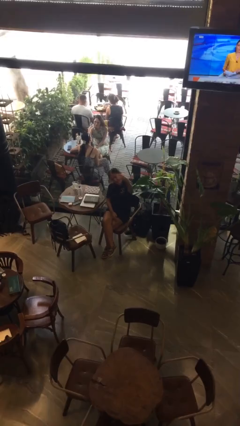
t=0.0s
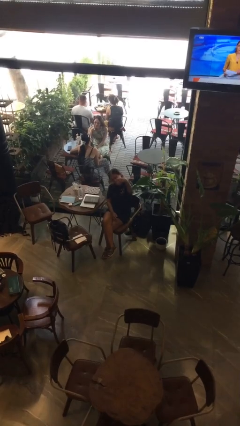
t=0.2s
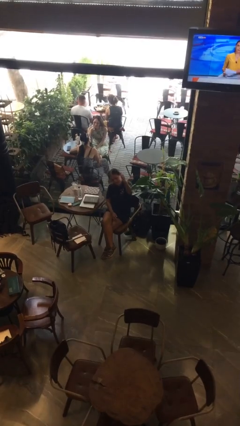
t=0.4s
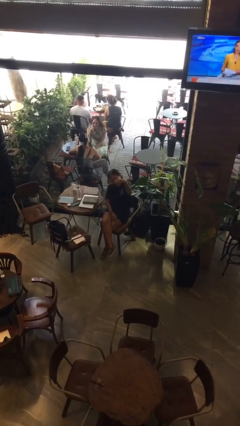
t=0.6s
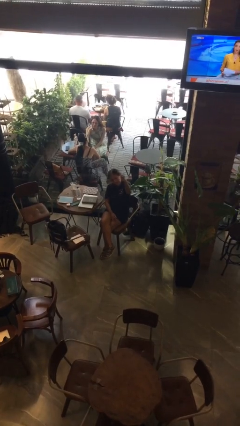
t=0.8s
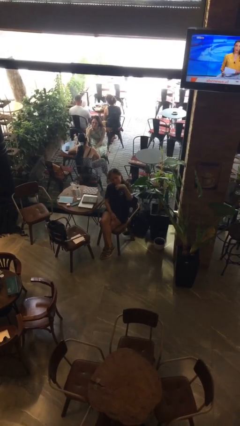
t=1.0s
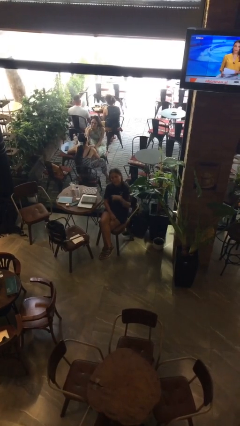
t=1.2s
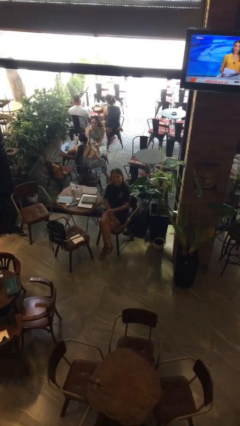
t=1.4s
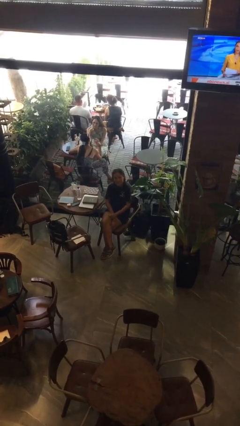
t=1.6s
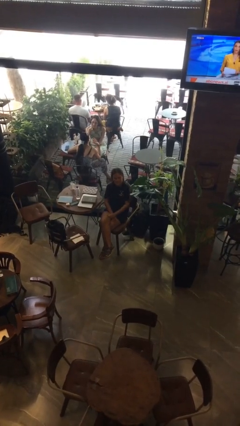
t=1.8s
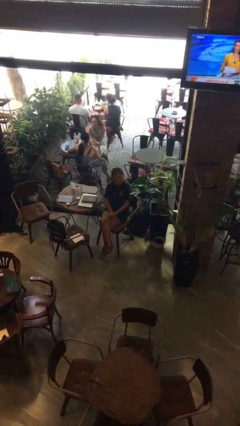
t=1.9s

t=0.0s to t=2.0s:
person gestures come here

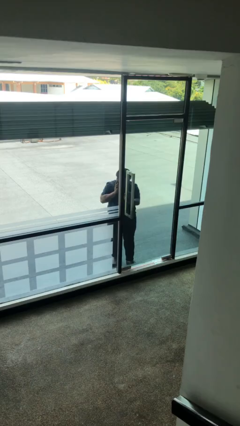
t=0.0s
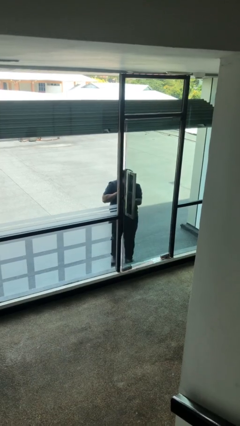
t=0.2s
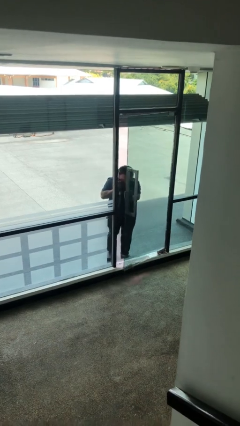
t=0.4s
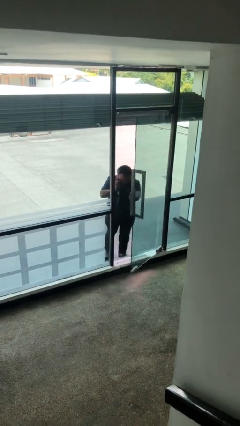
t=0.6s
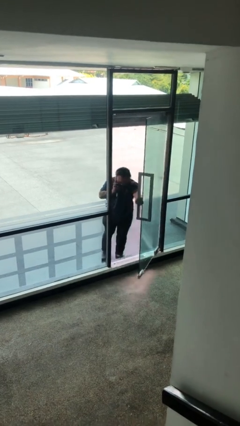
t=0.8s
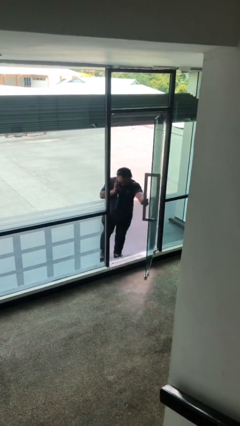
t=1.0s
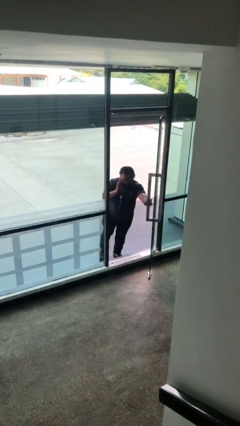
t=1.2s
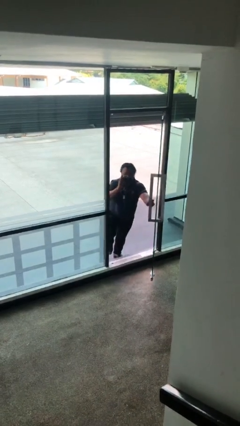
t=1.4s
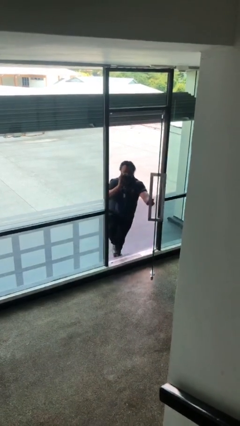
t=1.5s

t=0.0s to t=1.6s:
person opens facility door

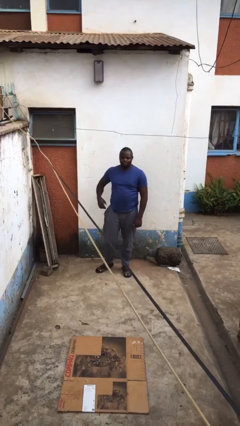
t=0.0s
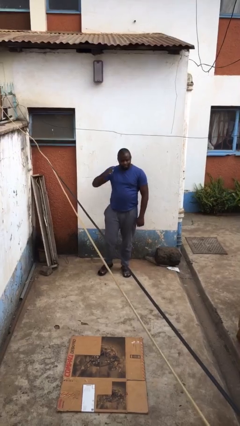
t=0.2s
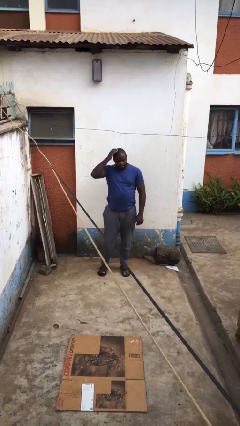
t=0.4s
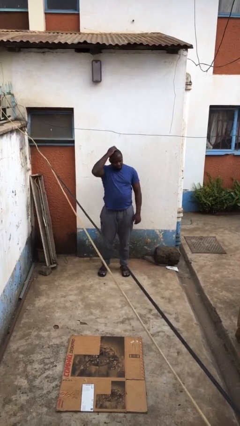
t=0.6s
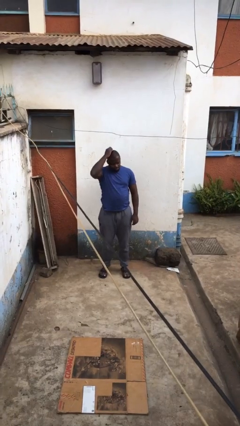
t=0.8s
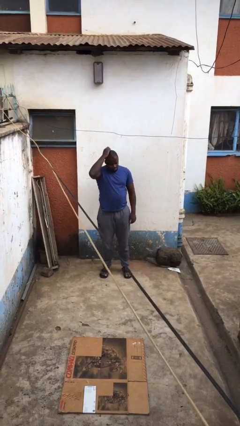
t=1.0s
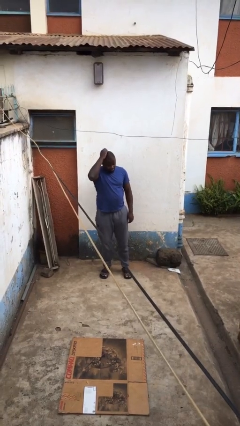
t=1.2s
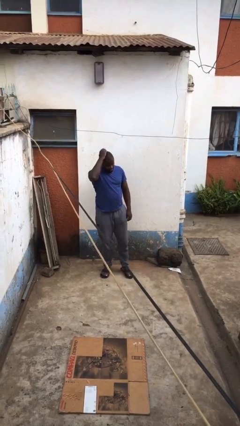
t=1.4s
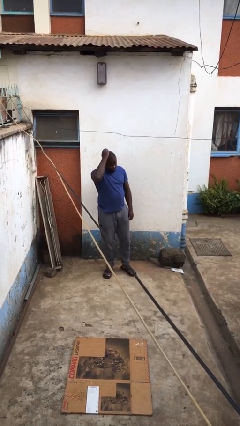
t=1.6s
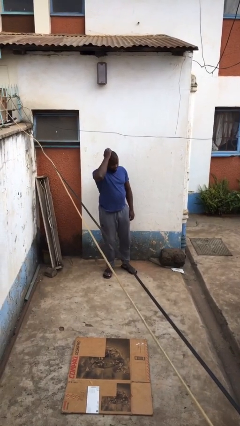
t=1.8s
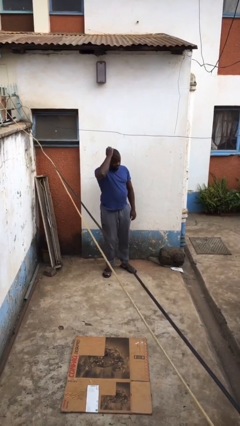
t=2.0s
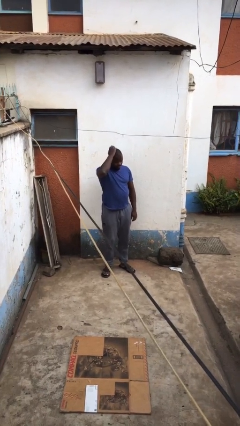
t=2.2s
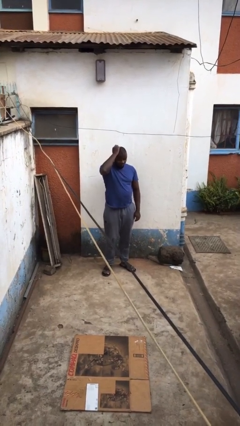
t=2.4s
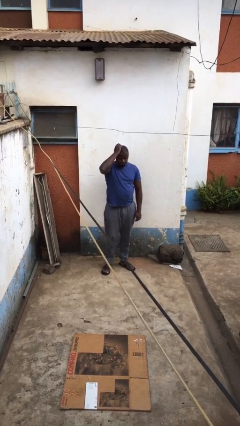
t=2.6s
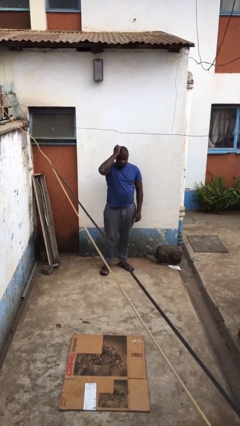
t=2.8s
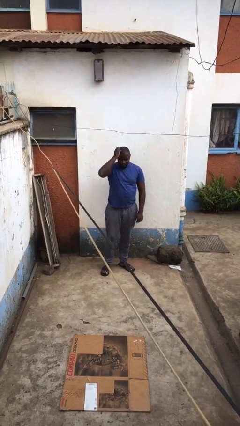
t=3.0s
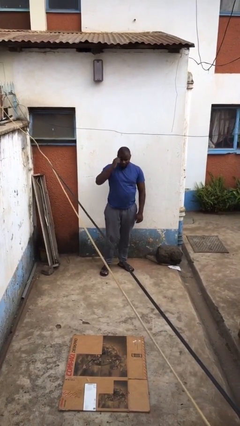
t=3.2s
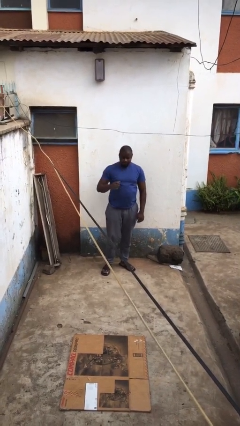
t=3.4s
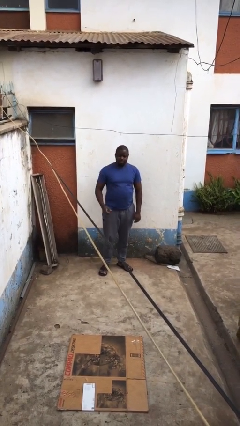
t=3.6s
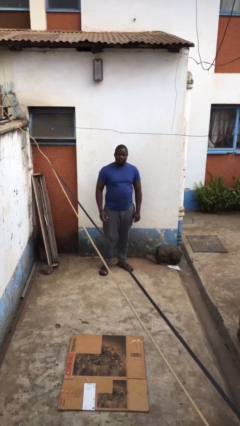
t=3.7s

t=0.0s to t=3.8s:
person scratches face

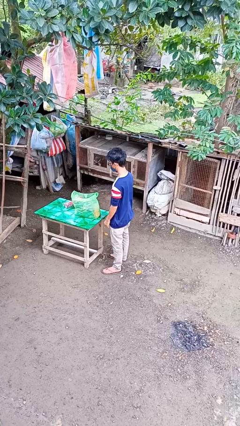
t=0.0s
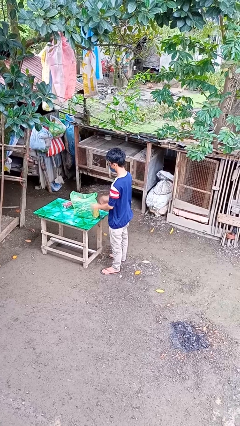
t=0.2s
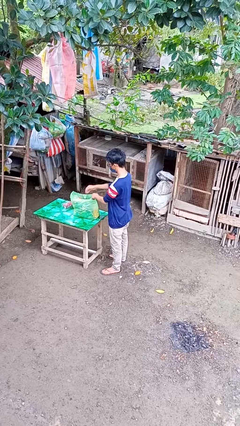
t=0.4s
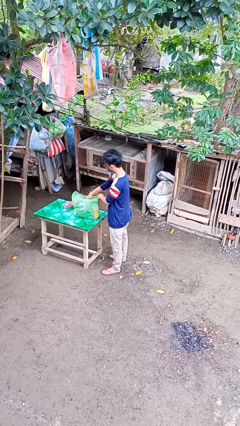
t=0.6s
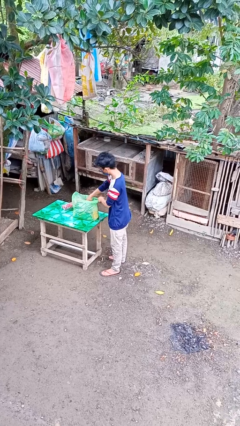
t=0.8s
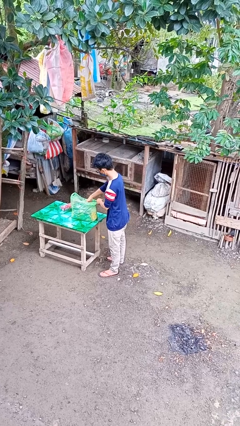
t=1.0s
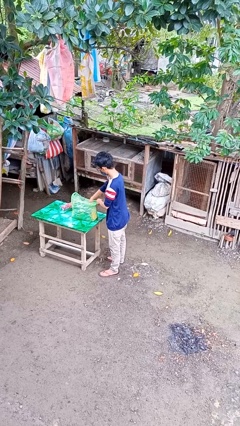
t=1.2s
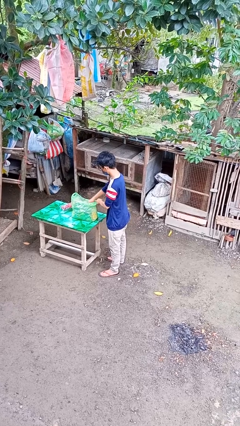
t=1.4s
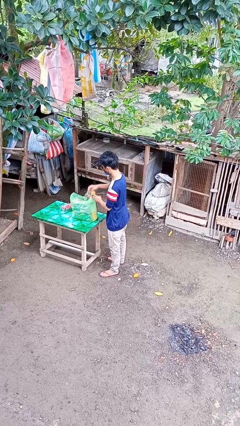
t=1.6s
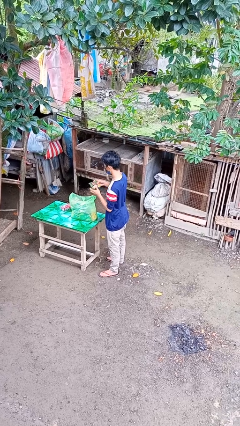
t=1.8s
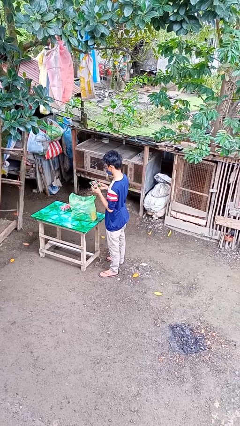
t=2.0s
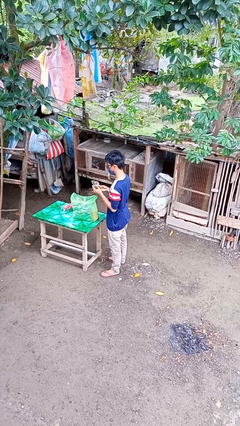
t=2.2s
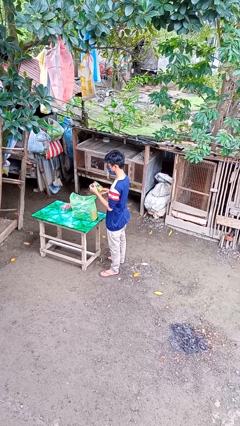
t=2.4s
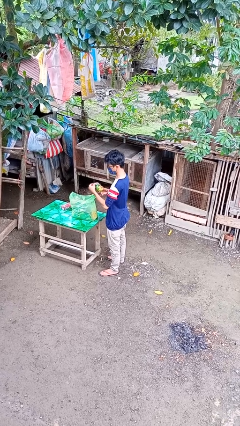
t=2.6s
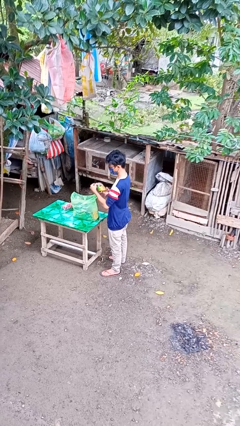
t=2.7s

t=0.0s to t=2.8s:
person takes object from bag

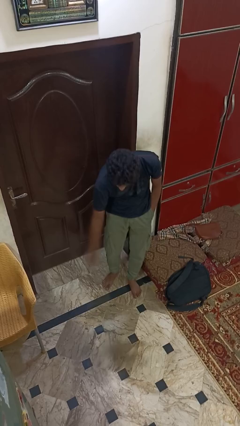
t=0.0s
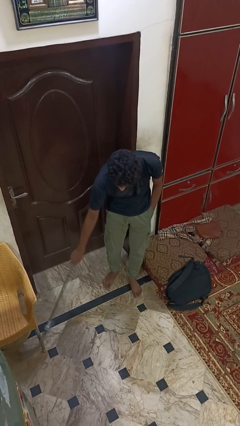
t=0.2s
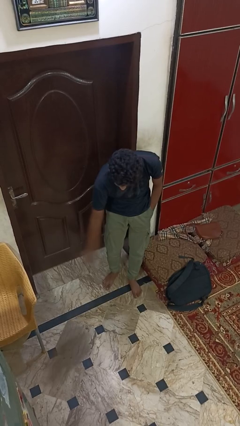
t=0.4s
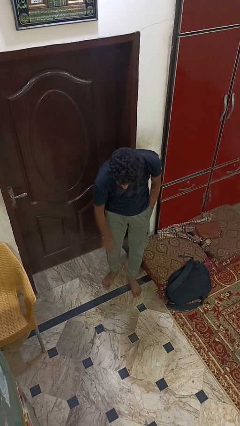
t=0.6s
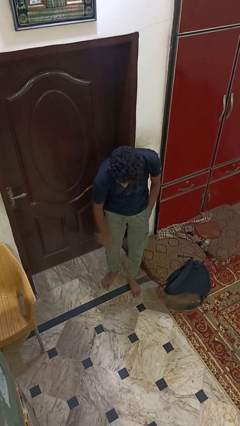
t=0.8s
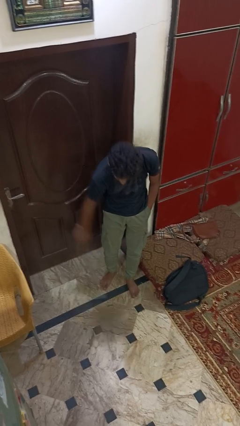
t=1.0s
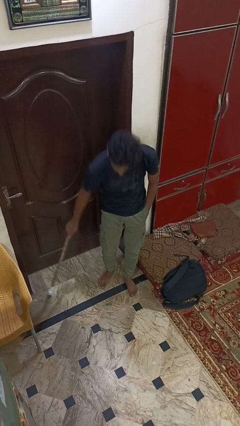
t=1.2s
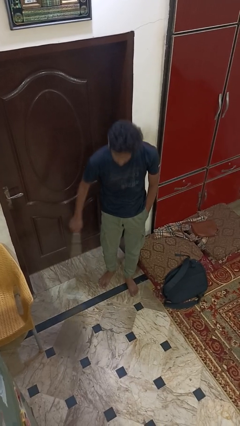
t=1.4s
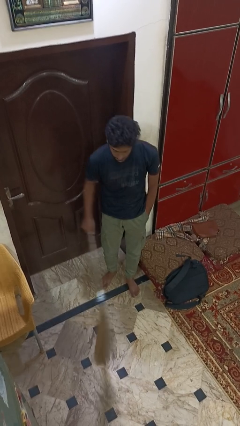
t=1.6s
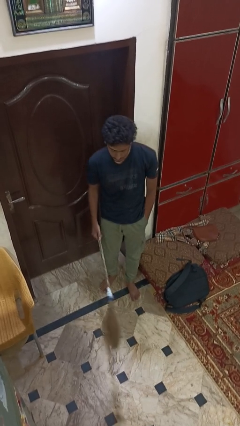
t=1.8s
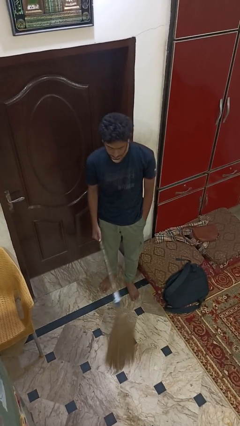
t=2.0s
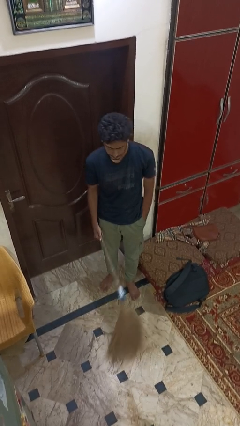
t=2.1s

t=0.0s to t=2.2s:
person sweeps floor

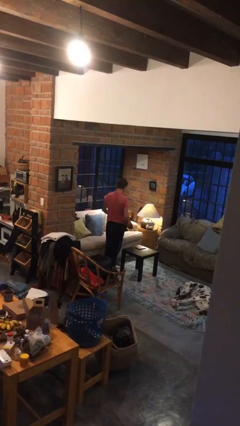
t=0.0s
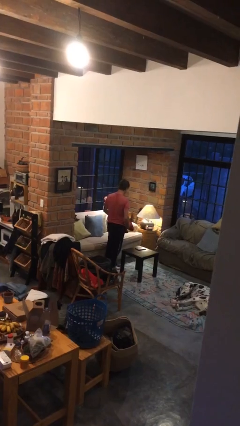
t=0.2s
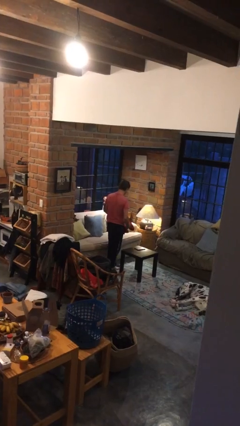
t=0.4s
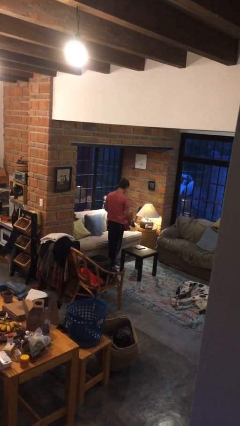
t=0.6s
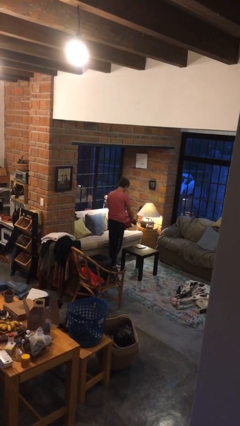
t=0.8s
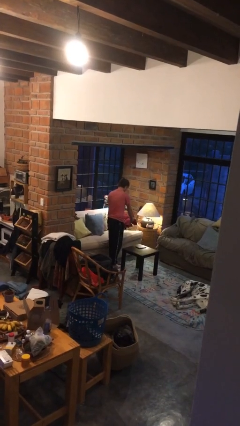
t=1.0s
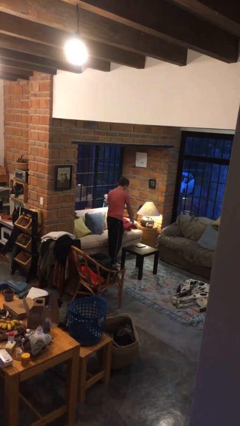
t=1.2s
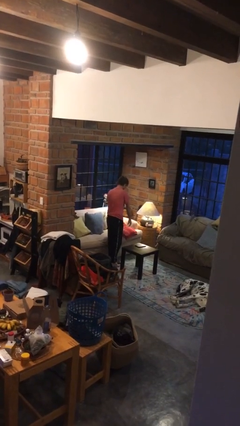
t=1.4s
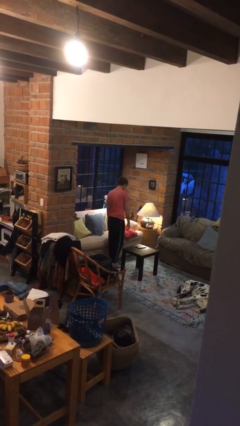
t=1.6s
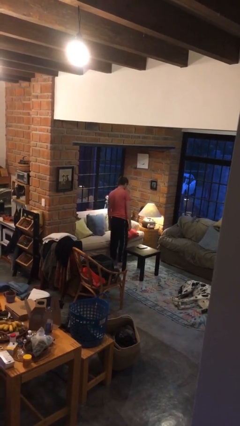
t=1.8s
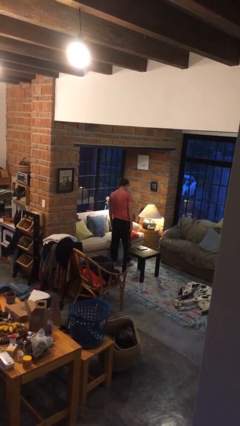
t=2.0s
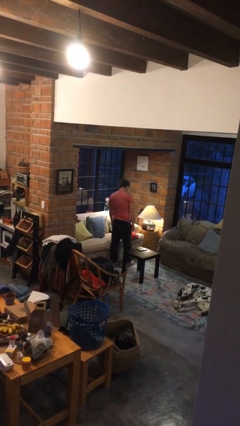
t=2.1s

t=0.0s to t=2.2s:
person puts down object on couch

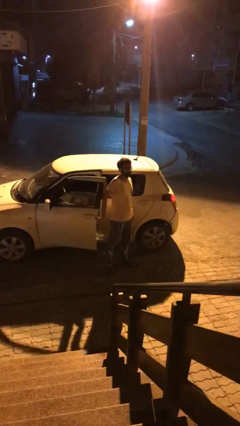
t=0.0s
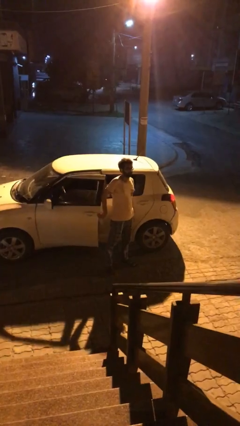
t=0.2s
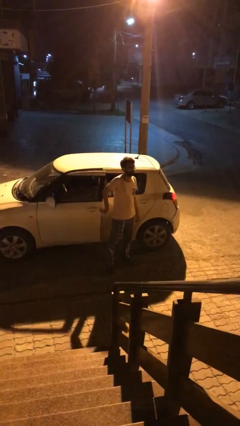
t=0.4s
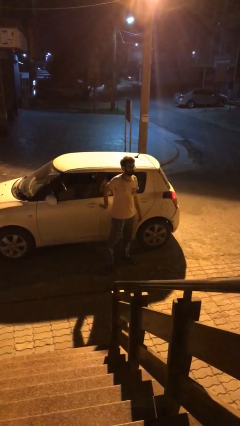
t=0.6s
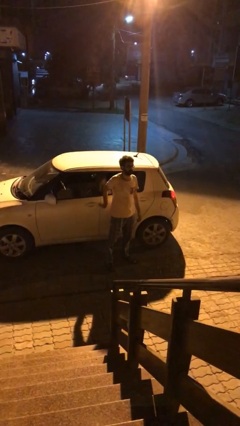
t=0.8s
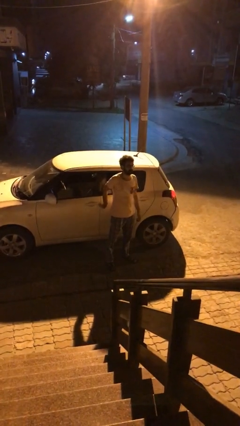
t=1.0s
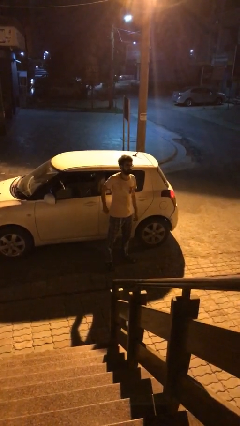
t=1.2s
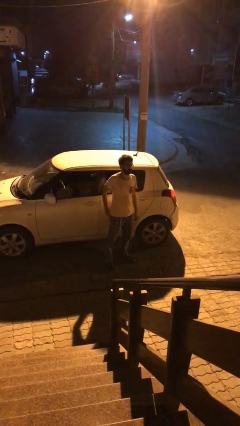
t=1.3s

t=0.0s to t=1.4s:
person closes car door

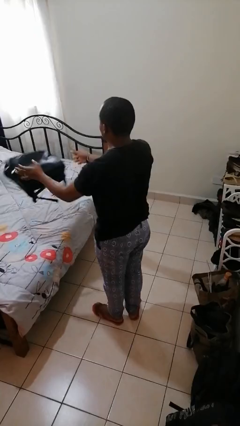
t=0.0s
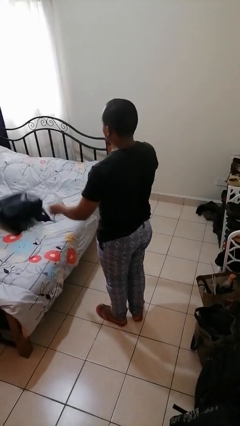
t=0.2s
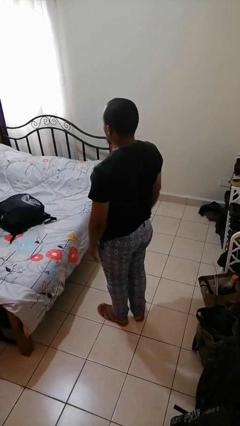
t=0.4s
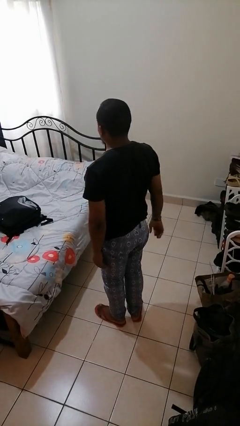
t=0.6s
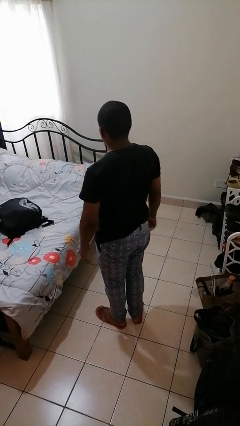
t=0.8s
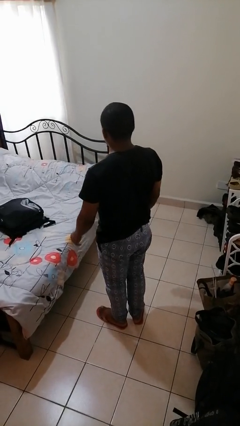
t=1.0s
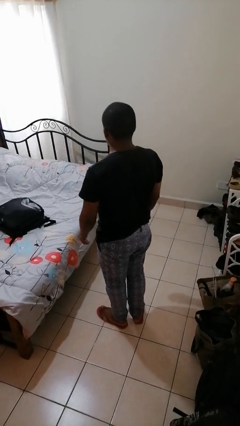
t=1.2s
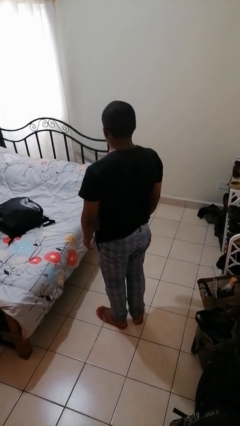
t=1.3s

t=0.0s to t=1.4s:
person throws object on bed
